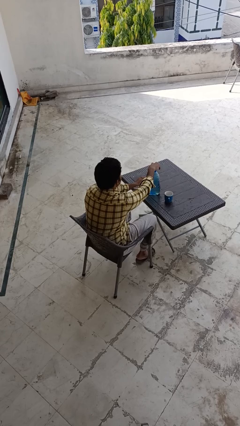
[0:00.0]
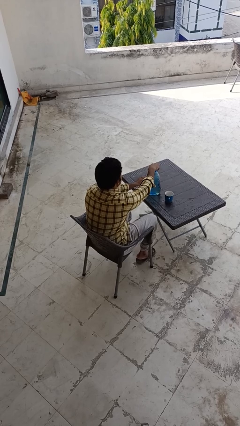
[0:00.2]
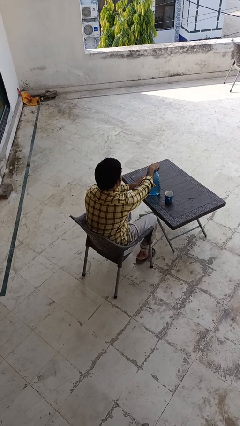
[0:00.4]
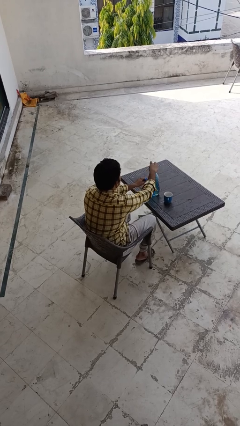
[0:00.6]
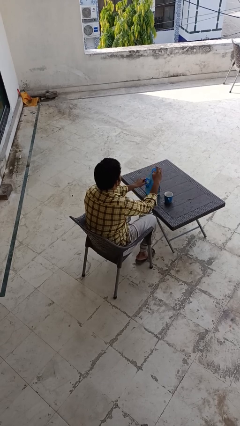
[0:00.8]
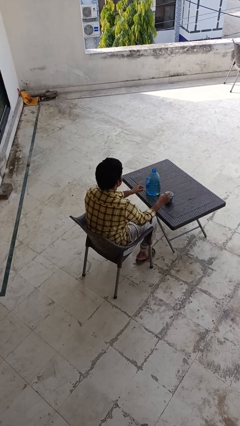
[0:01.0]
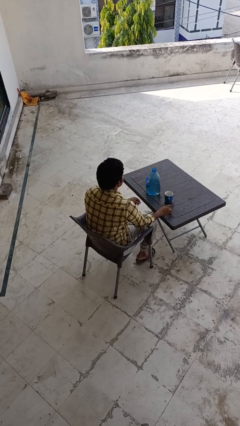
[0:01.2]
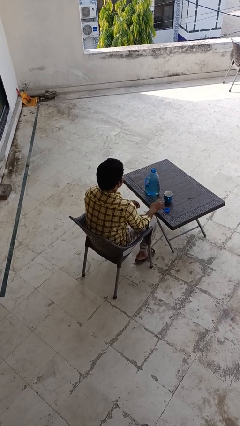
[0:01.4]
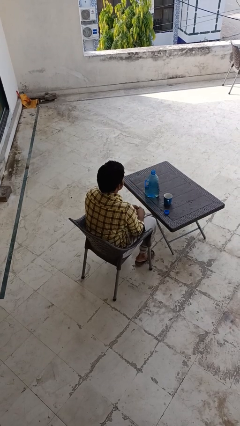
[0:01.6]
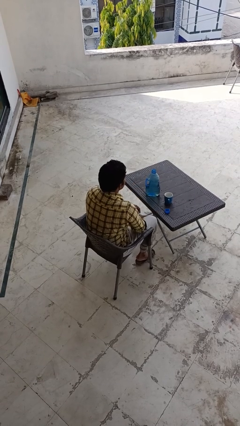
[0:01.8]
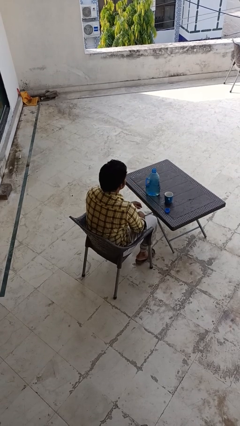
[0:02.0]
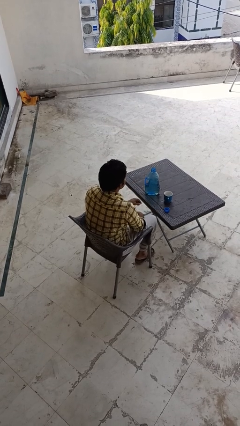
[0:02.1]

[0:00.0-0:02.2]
person unscrews lid from bottle

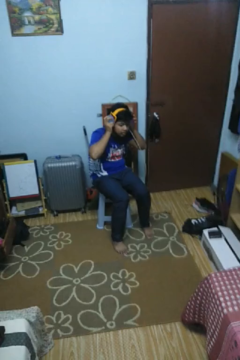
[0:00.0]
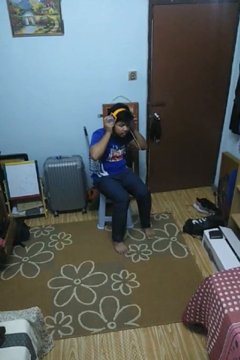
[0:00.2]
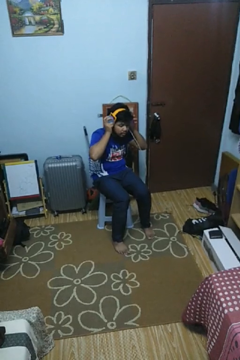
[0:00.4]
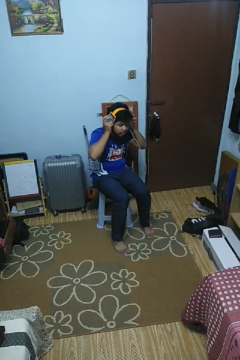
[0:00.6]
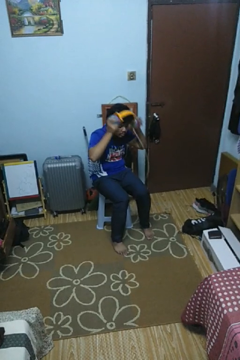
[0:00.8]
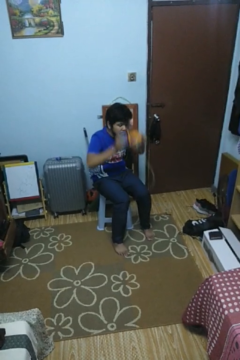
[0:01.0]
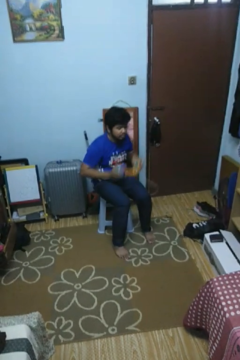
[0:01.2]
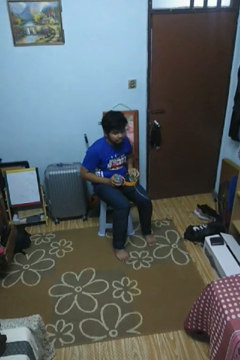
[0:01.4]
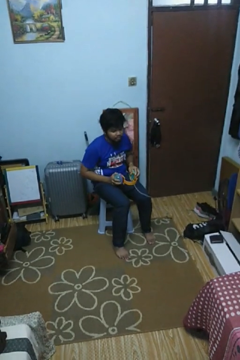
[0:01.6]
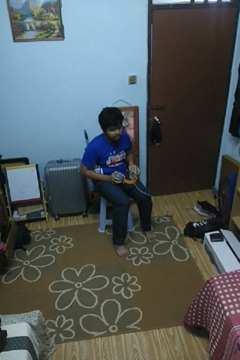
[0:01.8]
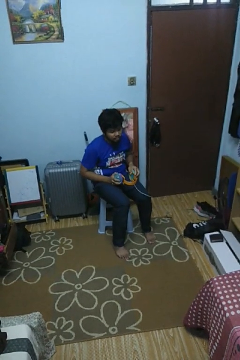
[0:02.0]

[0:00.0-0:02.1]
person takes off headphones

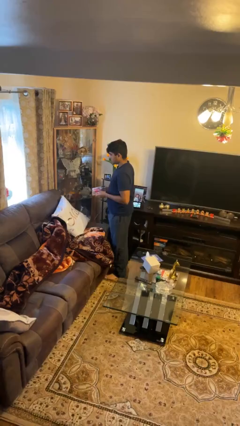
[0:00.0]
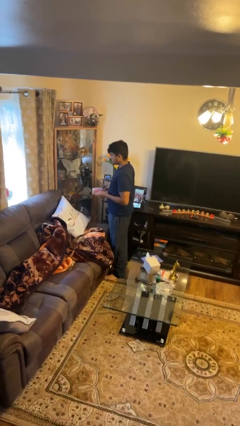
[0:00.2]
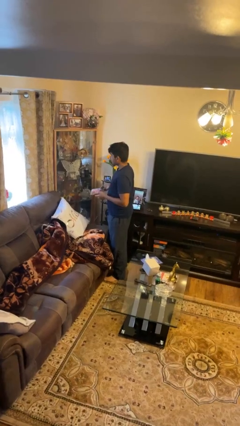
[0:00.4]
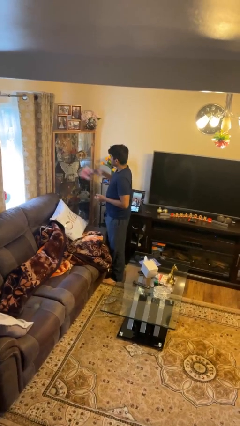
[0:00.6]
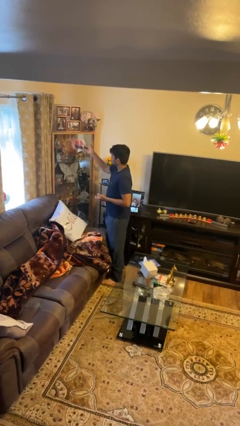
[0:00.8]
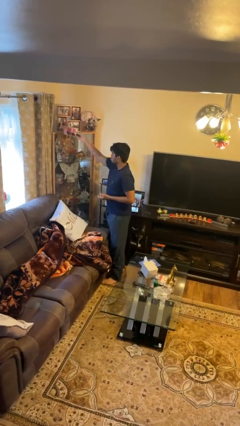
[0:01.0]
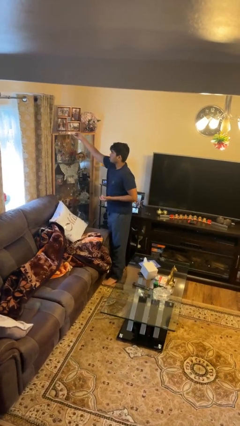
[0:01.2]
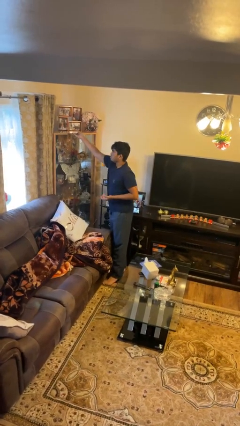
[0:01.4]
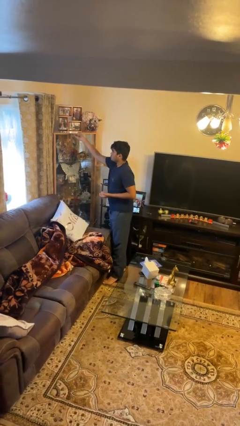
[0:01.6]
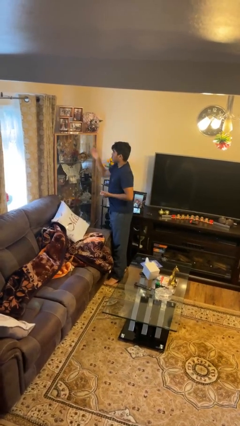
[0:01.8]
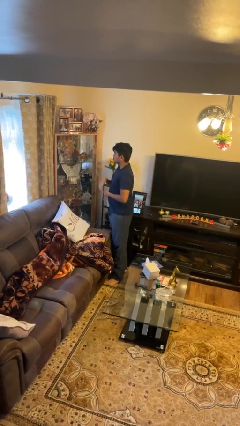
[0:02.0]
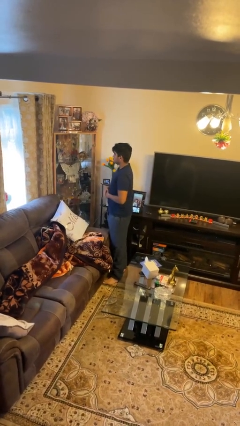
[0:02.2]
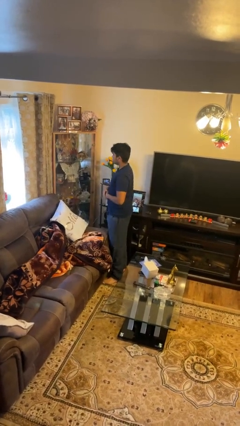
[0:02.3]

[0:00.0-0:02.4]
person puts down object on shelf

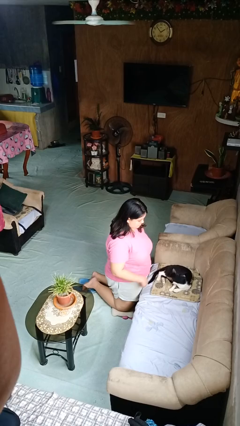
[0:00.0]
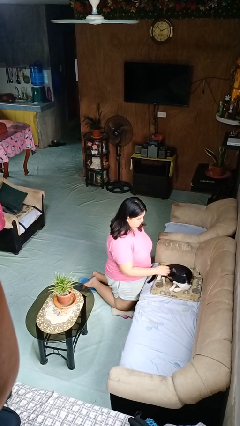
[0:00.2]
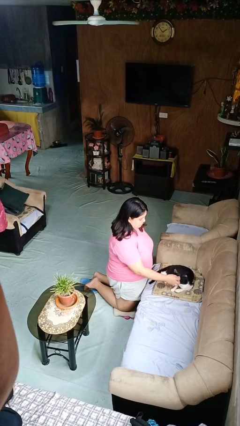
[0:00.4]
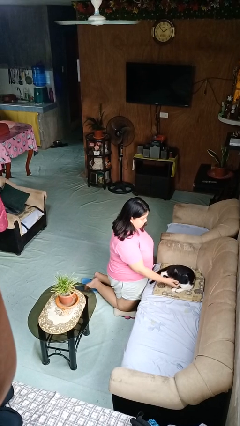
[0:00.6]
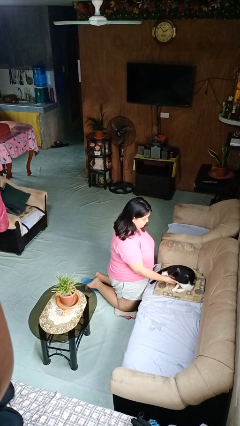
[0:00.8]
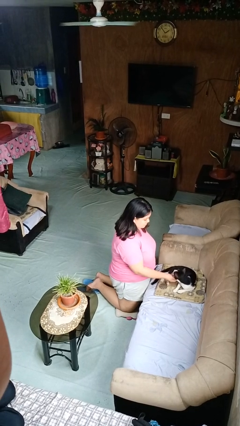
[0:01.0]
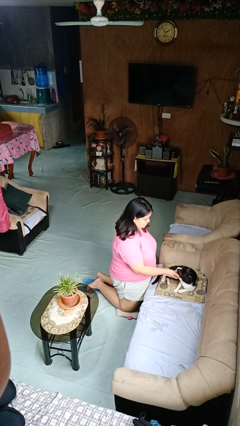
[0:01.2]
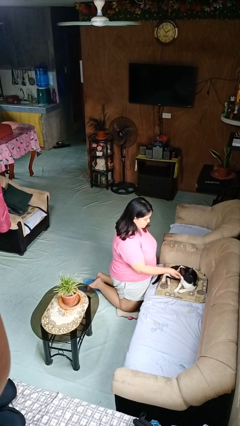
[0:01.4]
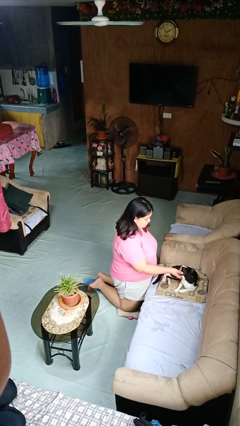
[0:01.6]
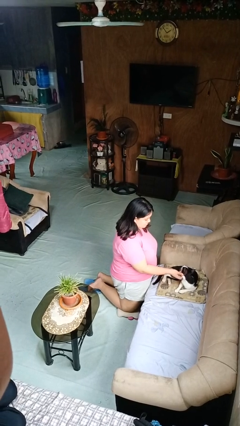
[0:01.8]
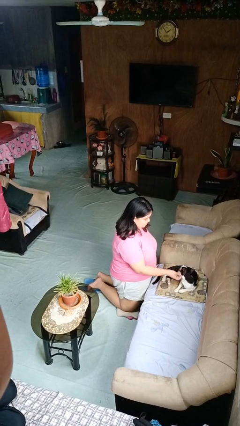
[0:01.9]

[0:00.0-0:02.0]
person pets cat

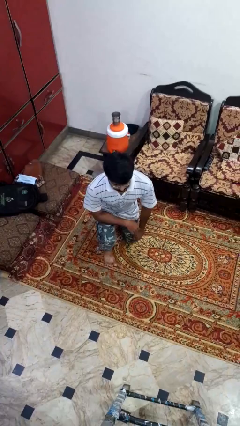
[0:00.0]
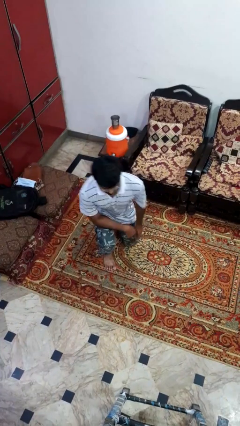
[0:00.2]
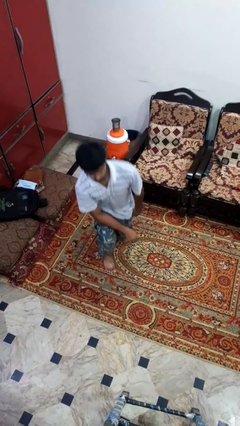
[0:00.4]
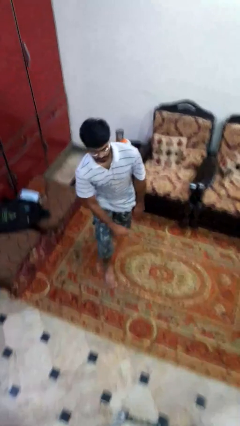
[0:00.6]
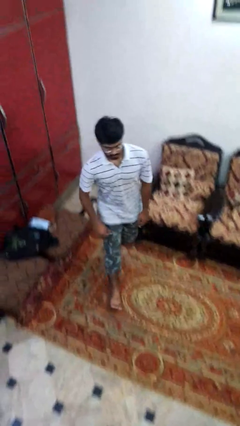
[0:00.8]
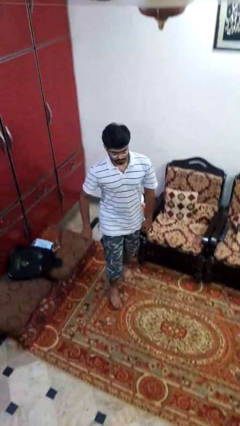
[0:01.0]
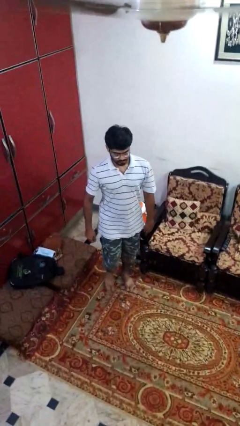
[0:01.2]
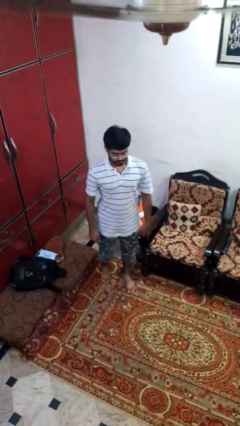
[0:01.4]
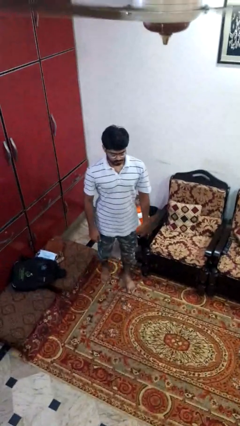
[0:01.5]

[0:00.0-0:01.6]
person stands up from floor

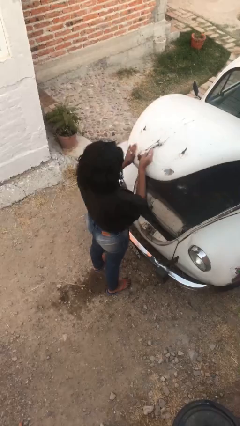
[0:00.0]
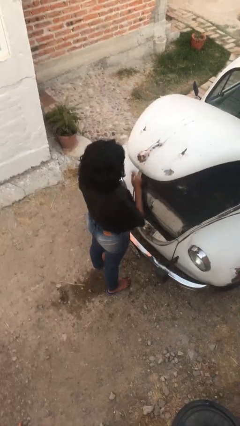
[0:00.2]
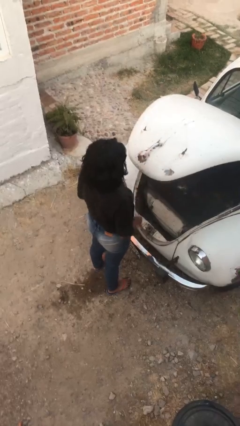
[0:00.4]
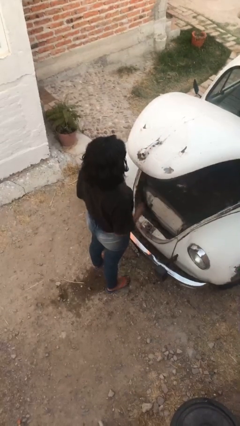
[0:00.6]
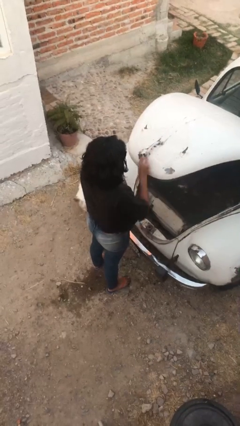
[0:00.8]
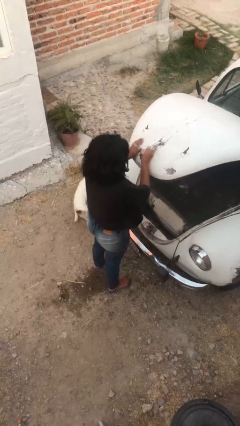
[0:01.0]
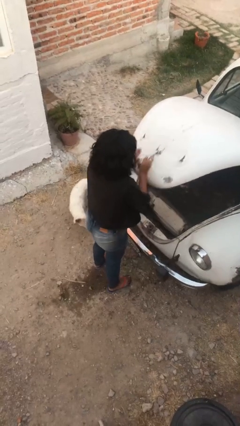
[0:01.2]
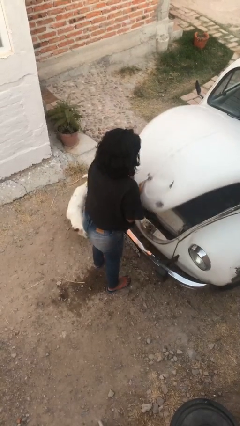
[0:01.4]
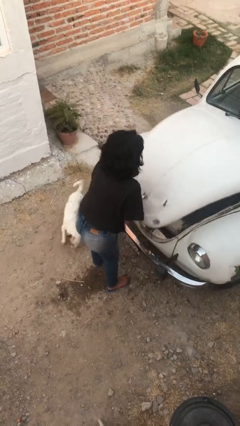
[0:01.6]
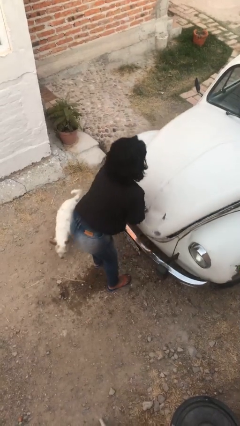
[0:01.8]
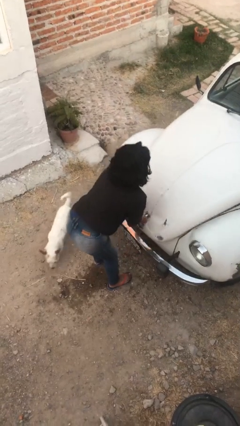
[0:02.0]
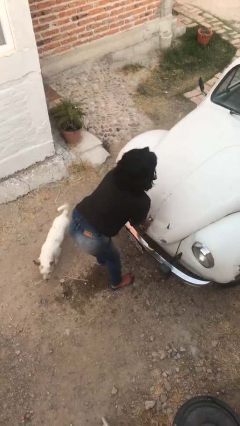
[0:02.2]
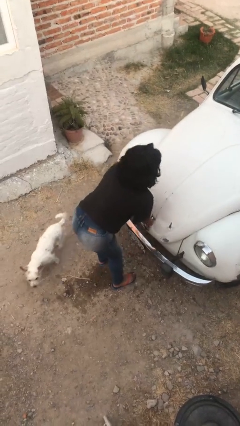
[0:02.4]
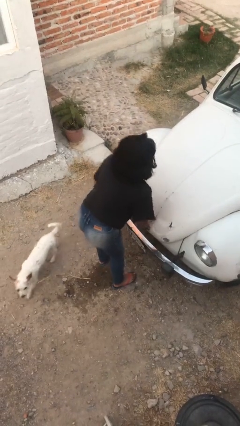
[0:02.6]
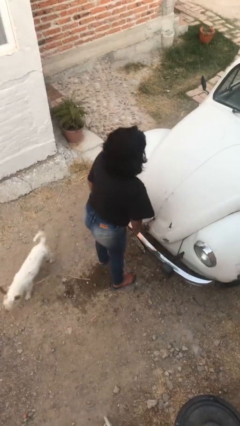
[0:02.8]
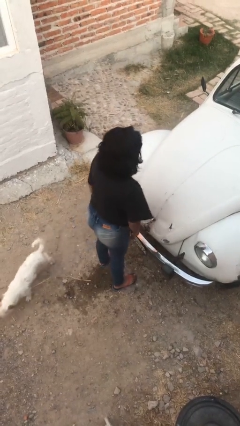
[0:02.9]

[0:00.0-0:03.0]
person closes car trunk

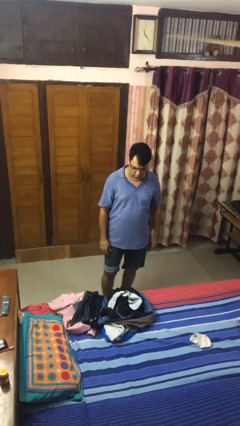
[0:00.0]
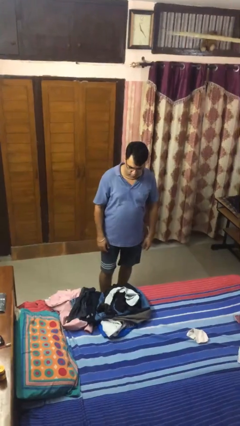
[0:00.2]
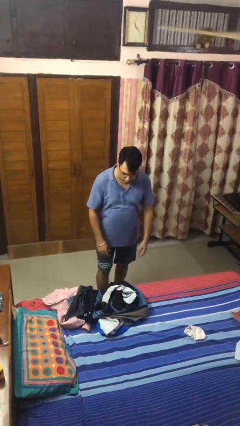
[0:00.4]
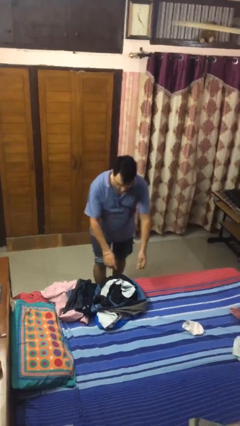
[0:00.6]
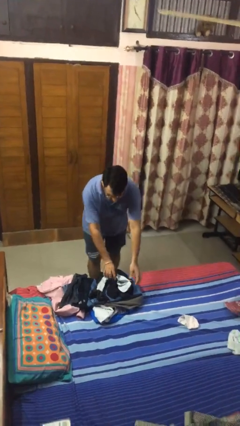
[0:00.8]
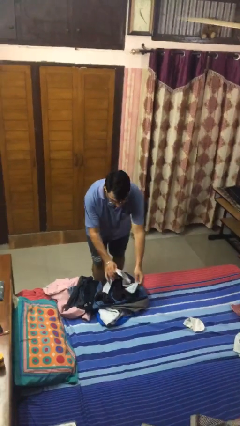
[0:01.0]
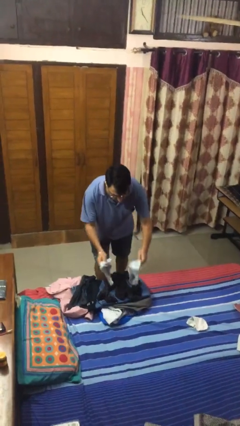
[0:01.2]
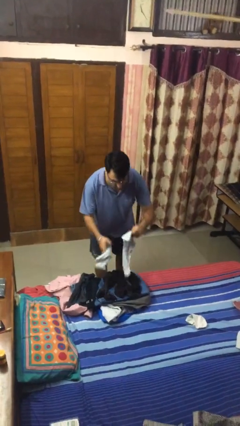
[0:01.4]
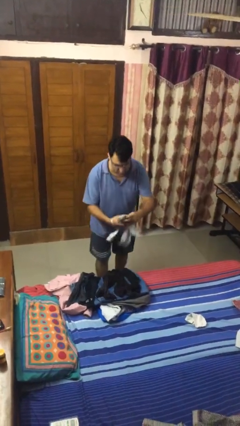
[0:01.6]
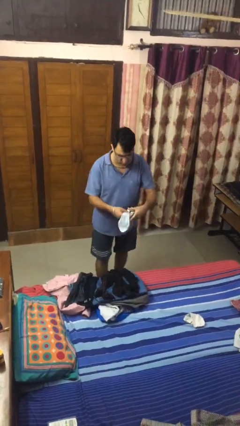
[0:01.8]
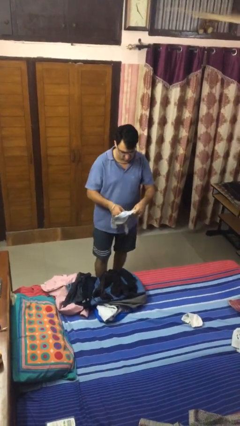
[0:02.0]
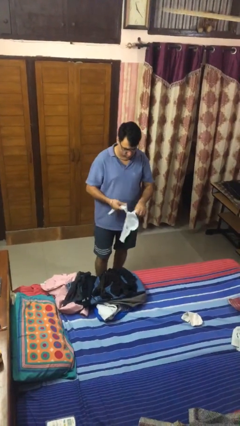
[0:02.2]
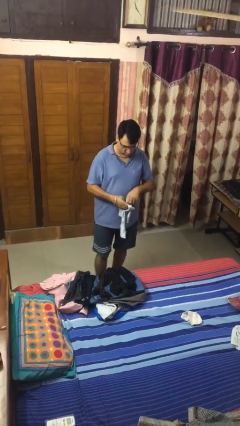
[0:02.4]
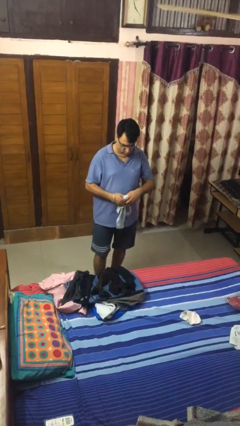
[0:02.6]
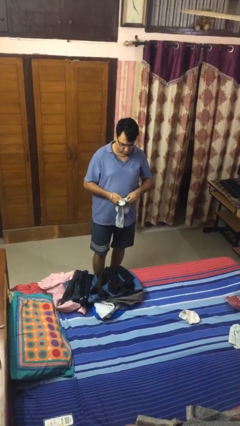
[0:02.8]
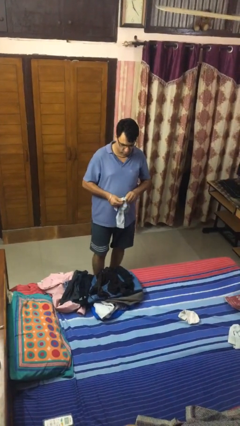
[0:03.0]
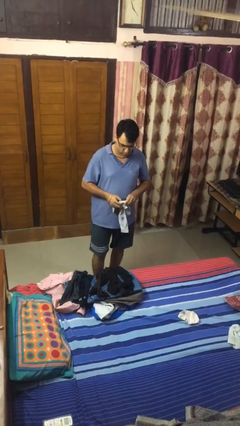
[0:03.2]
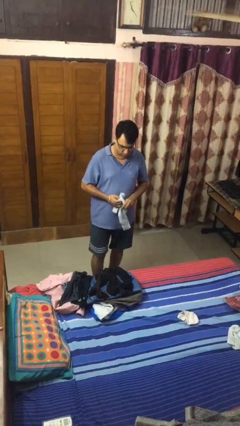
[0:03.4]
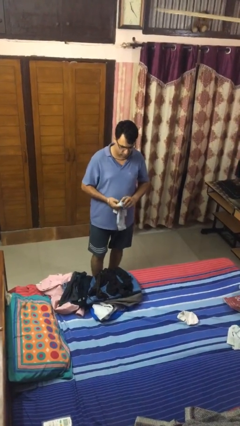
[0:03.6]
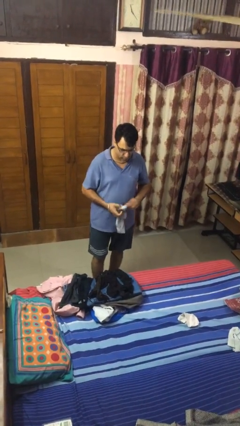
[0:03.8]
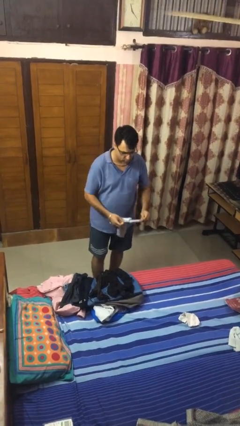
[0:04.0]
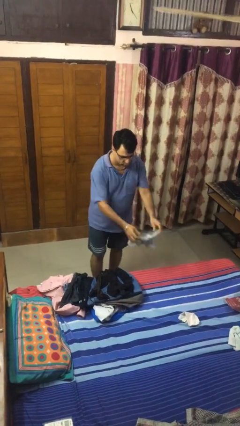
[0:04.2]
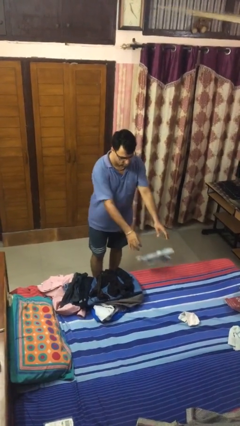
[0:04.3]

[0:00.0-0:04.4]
person folds socks
